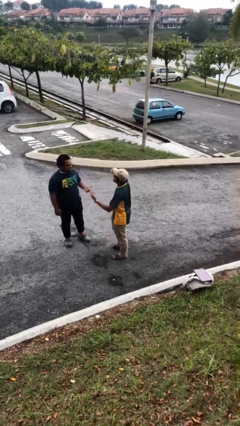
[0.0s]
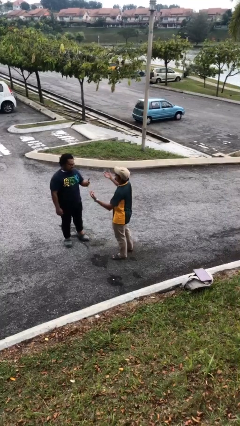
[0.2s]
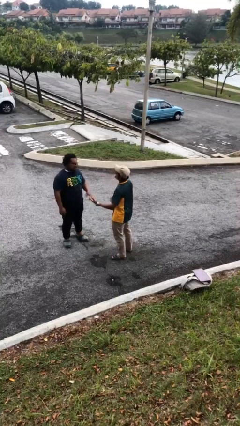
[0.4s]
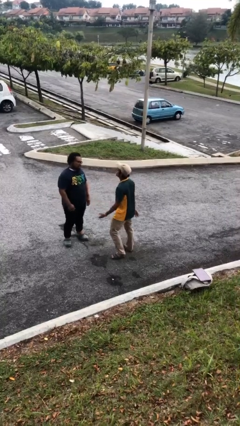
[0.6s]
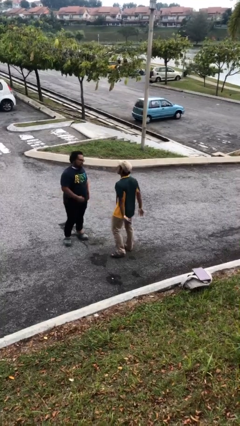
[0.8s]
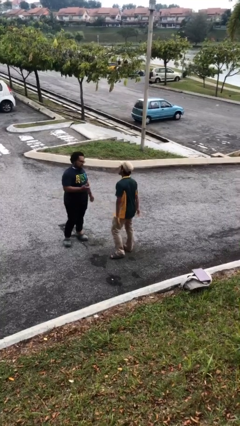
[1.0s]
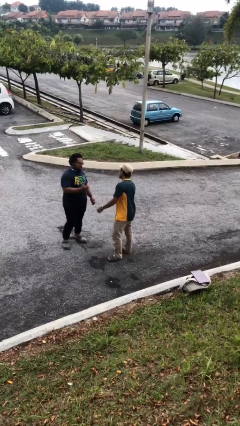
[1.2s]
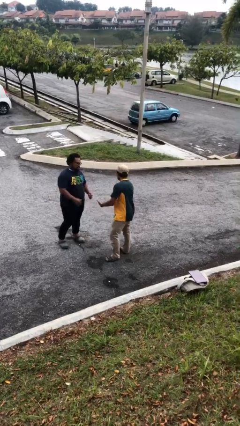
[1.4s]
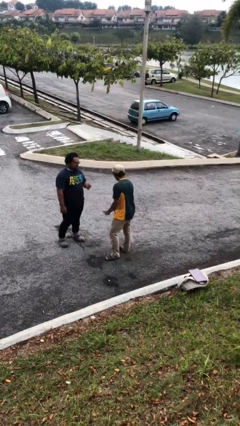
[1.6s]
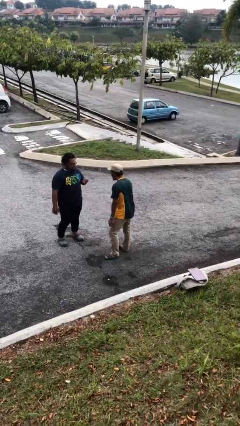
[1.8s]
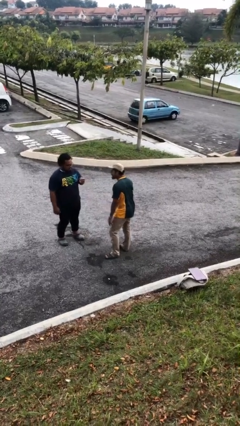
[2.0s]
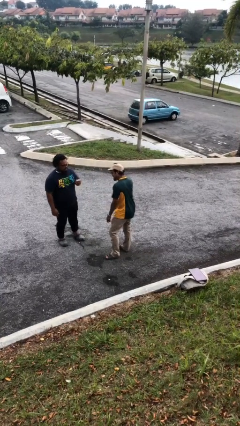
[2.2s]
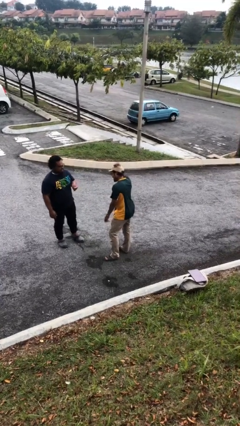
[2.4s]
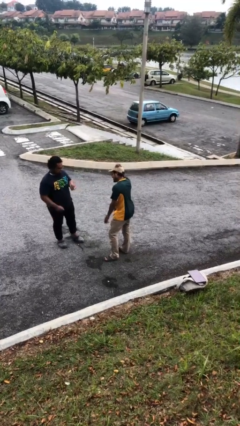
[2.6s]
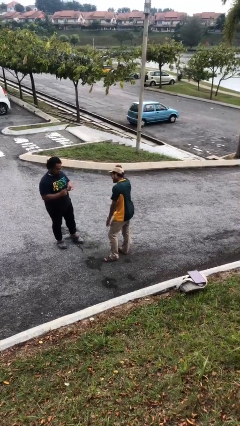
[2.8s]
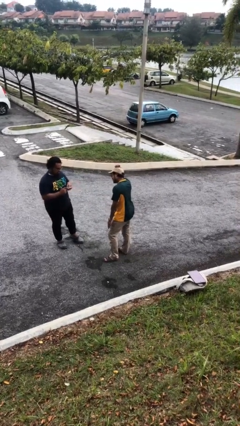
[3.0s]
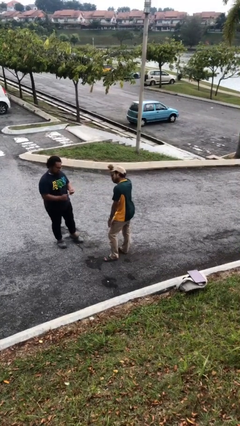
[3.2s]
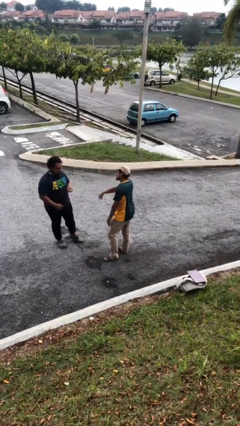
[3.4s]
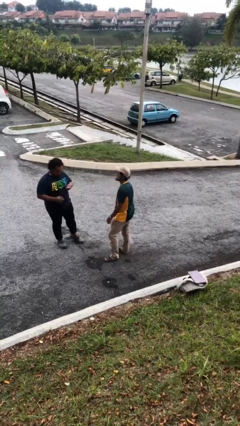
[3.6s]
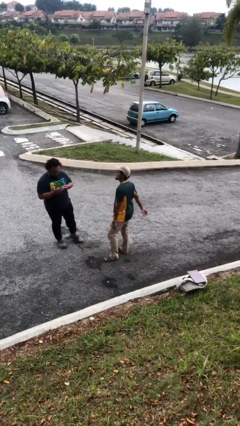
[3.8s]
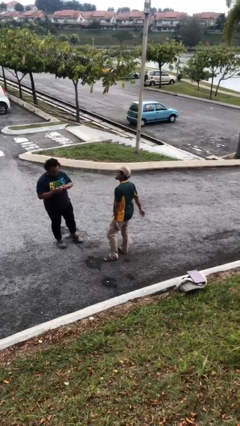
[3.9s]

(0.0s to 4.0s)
person talks to person

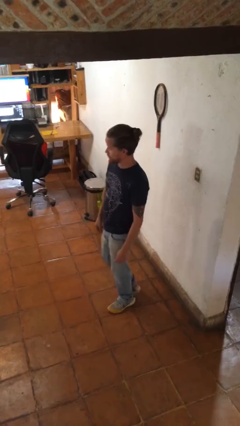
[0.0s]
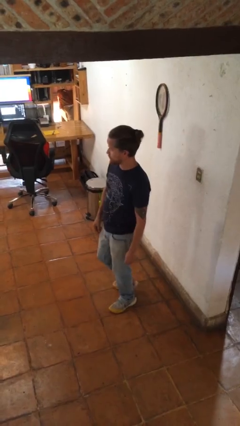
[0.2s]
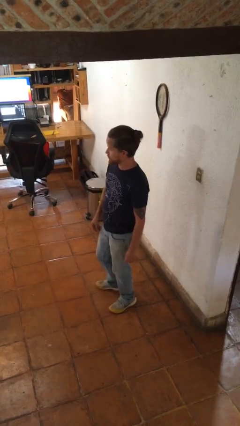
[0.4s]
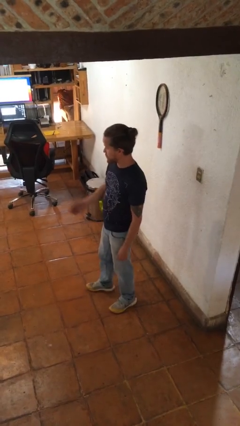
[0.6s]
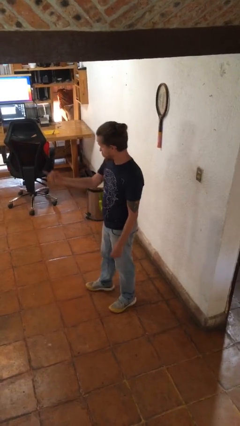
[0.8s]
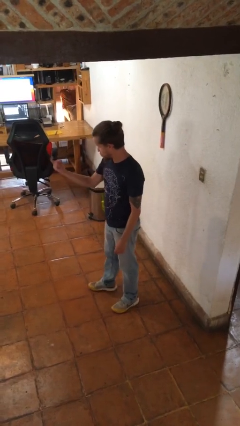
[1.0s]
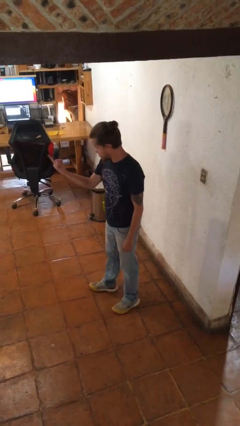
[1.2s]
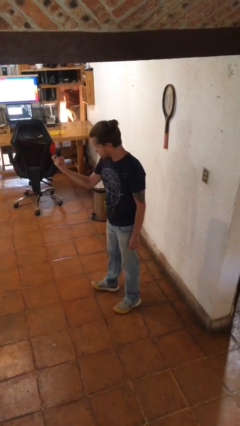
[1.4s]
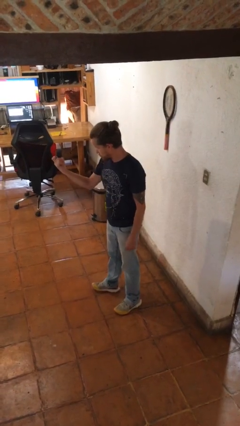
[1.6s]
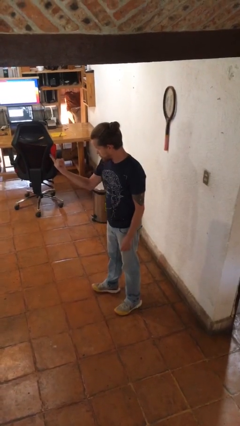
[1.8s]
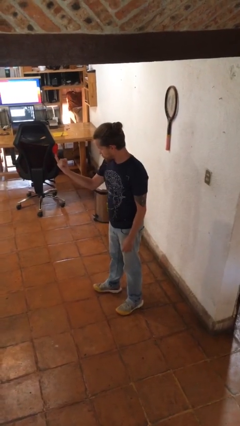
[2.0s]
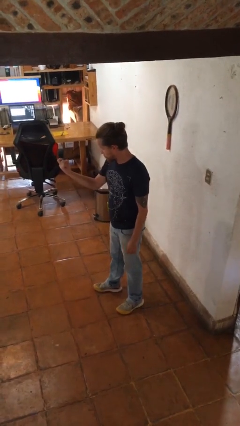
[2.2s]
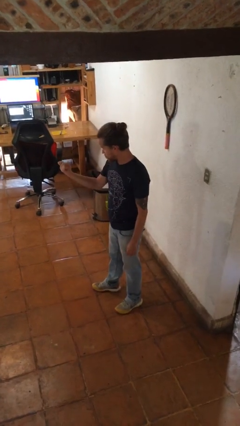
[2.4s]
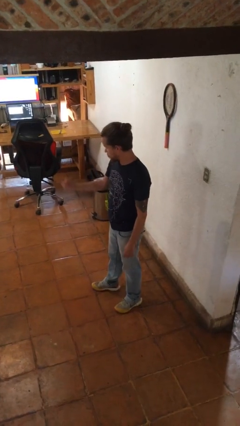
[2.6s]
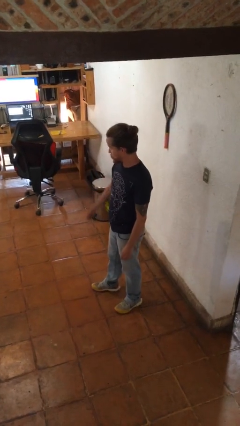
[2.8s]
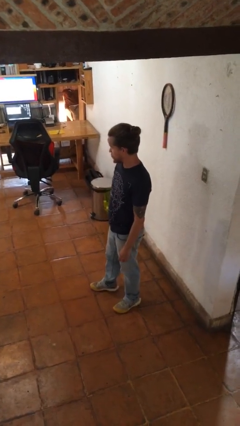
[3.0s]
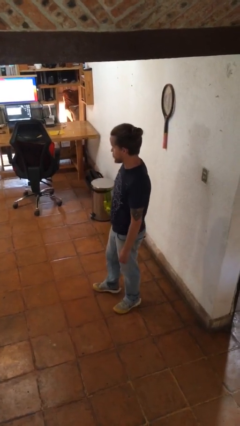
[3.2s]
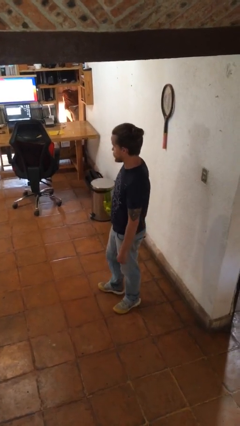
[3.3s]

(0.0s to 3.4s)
person gestures come here

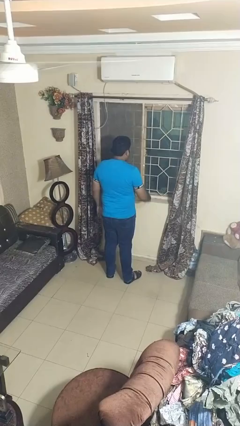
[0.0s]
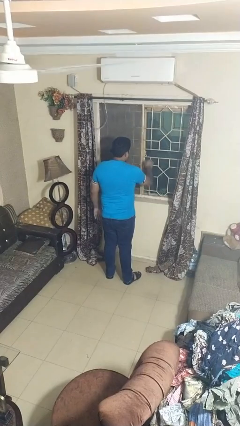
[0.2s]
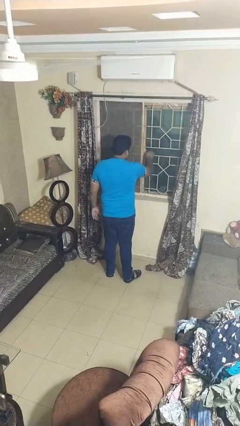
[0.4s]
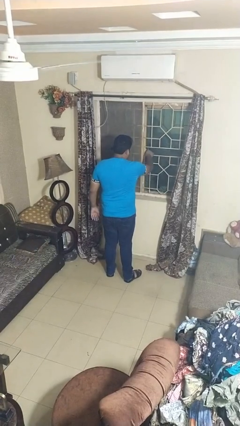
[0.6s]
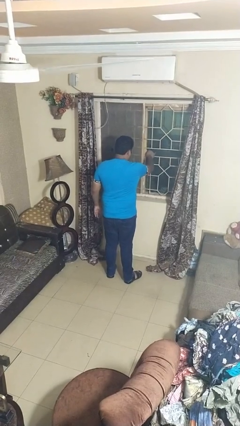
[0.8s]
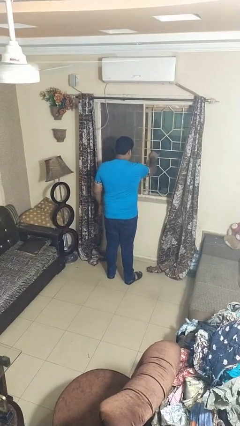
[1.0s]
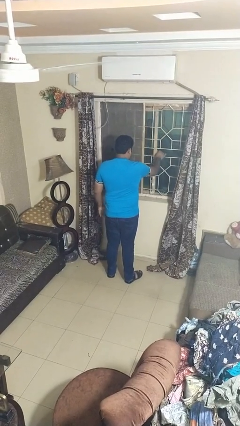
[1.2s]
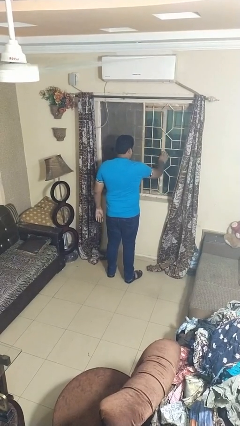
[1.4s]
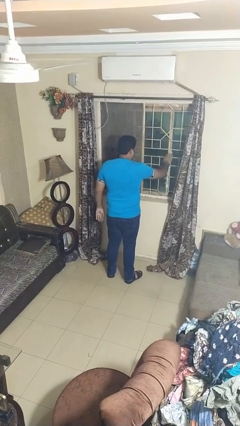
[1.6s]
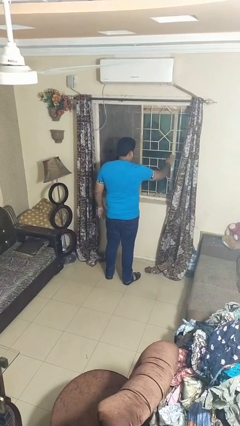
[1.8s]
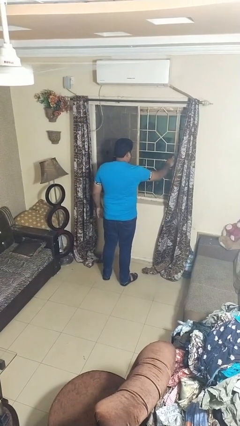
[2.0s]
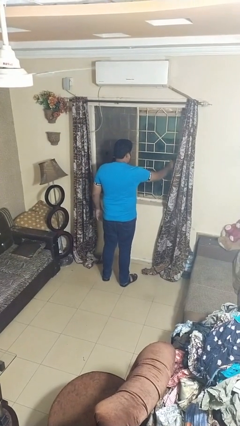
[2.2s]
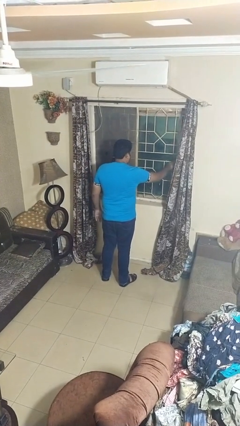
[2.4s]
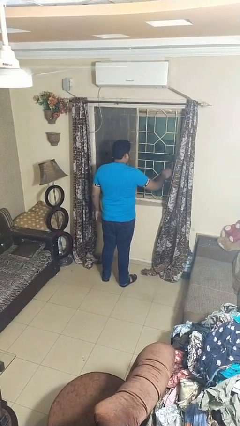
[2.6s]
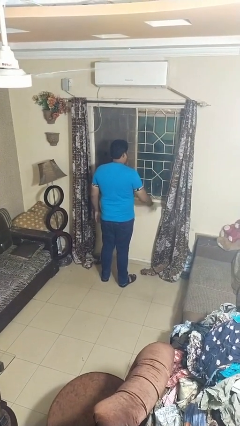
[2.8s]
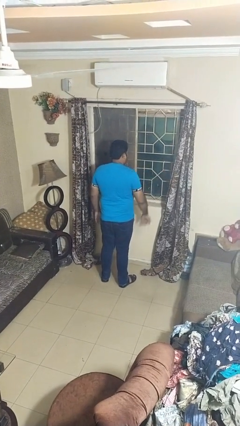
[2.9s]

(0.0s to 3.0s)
person opens home window

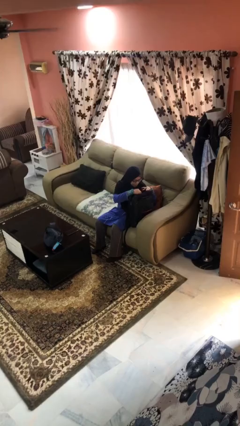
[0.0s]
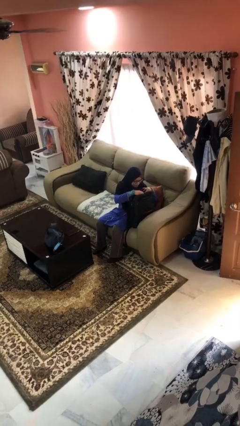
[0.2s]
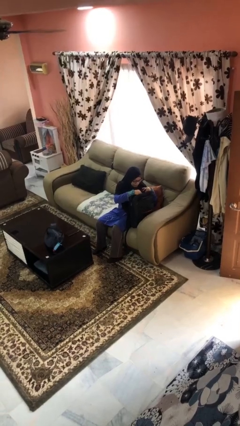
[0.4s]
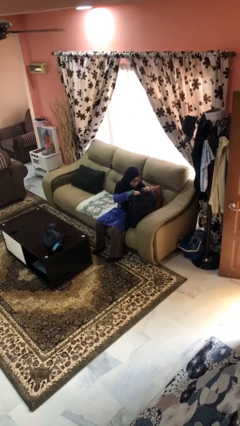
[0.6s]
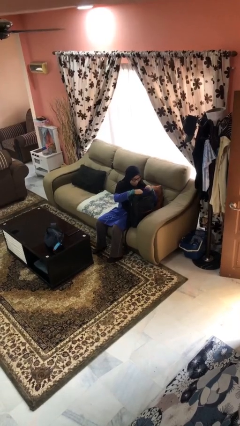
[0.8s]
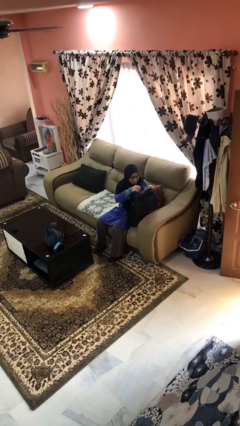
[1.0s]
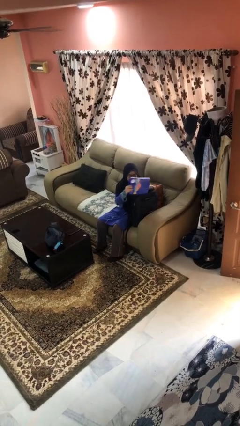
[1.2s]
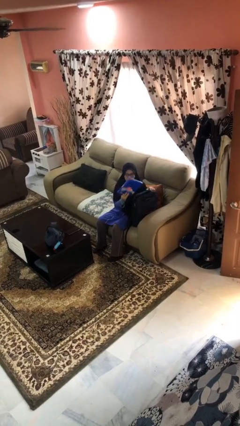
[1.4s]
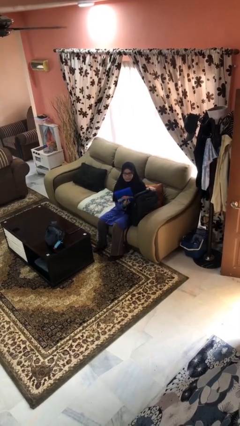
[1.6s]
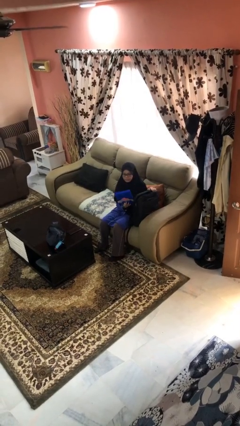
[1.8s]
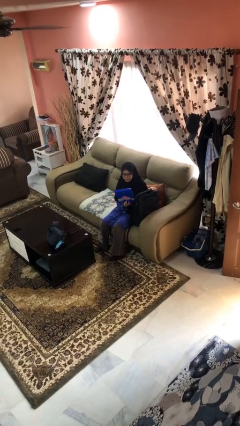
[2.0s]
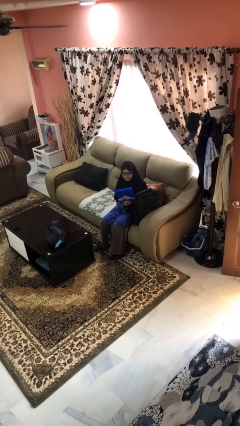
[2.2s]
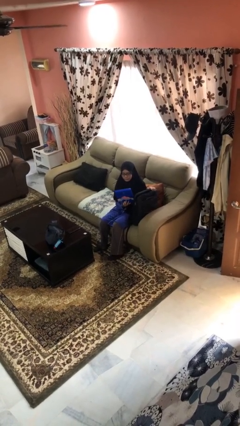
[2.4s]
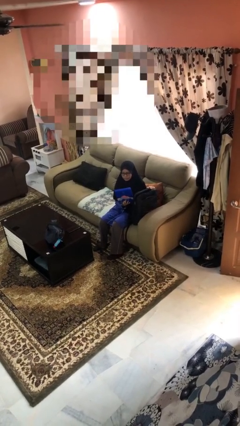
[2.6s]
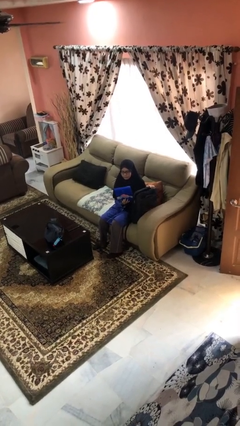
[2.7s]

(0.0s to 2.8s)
person takes object from backpack

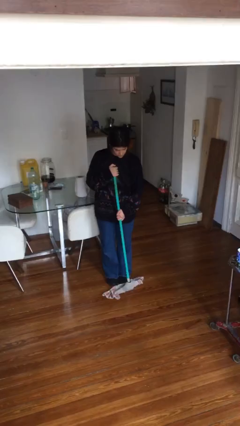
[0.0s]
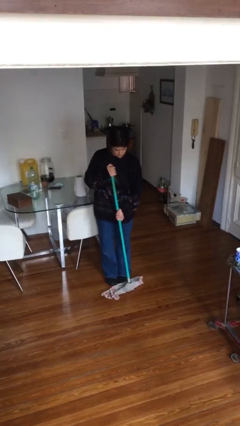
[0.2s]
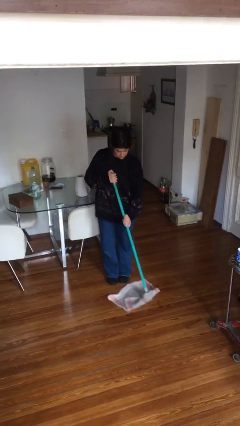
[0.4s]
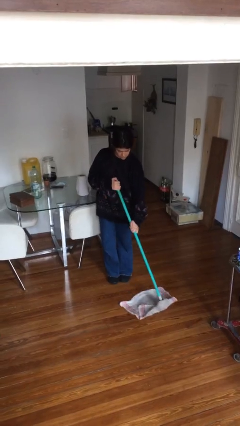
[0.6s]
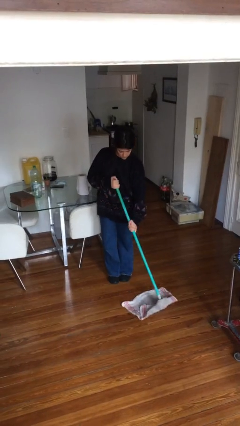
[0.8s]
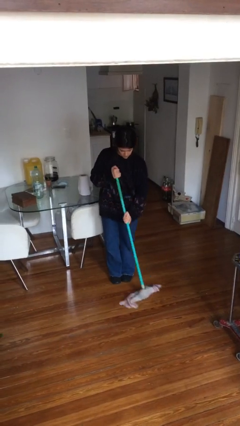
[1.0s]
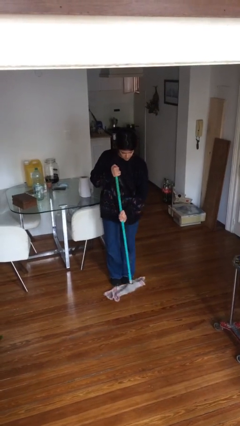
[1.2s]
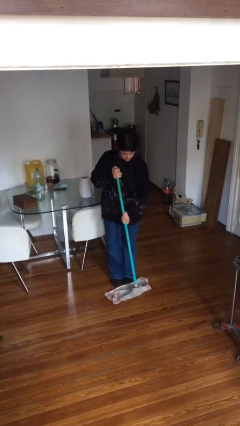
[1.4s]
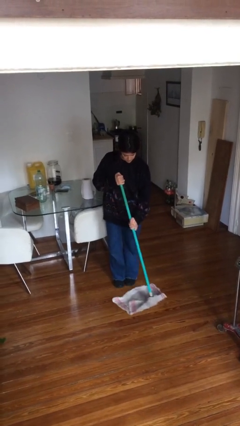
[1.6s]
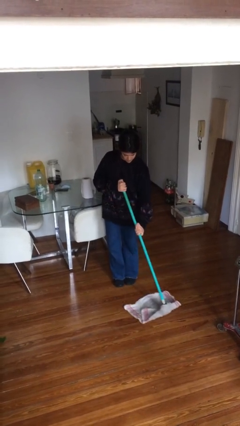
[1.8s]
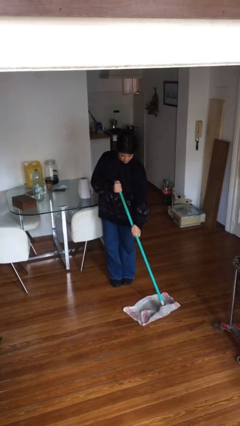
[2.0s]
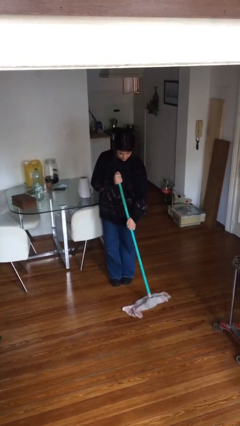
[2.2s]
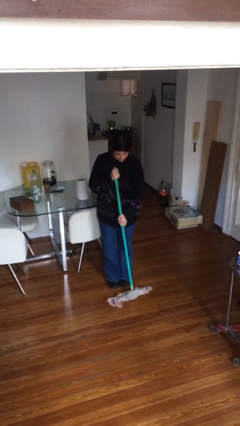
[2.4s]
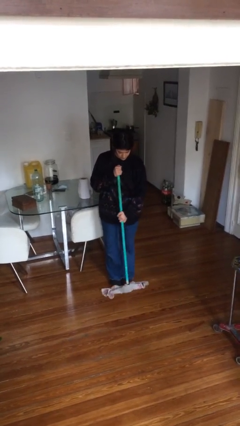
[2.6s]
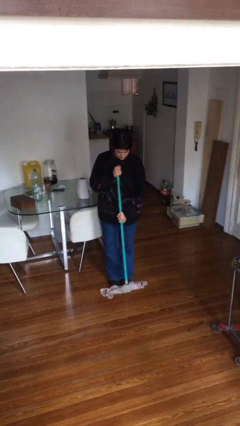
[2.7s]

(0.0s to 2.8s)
person mops

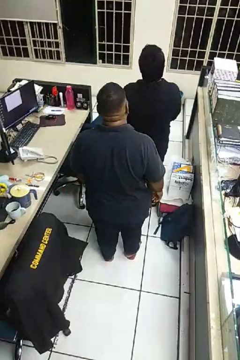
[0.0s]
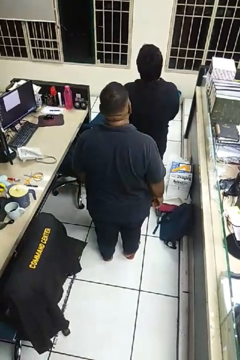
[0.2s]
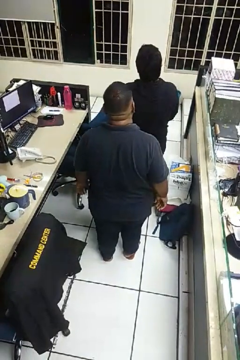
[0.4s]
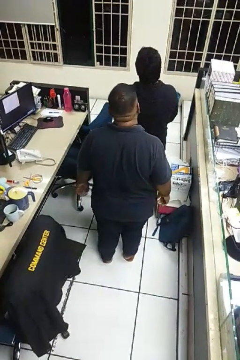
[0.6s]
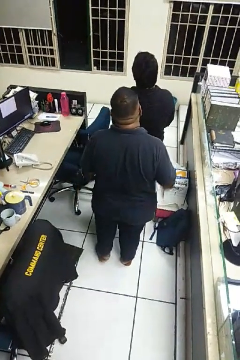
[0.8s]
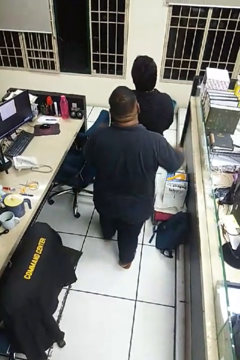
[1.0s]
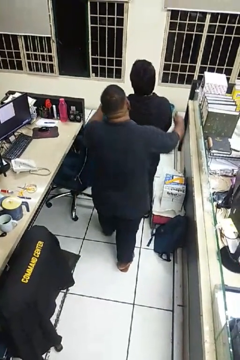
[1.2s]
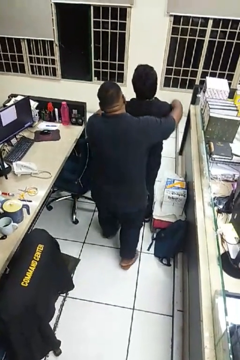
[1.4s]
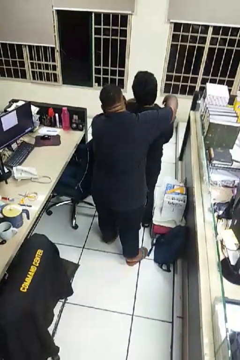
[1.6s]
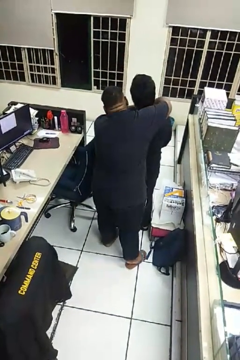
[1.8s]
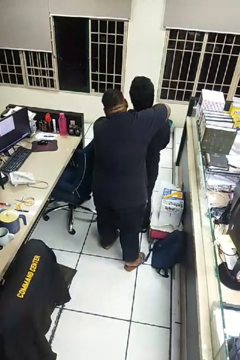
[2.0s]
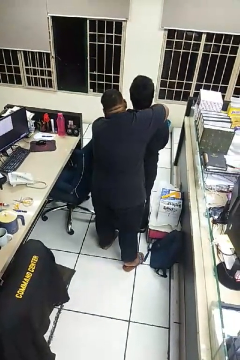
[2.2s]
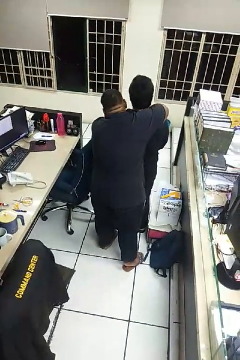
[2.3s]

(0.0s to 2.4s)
person hugs person from behind
